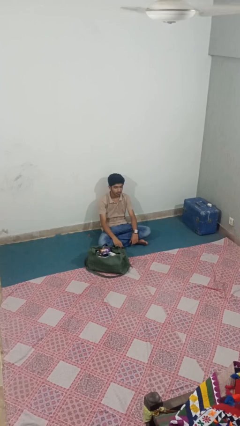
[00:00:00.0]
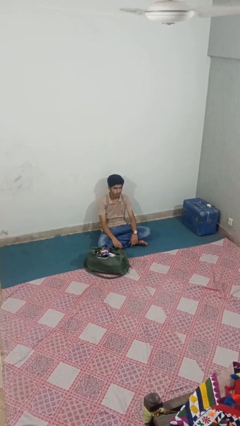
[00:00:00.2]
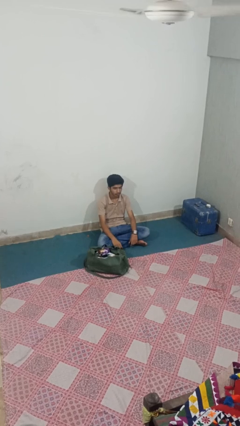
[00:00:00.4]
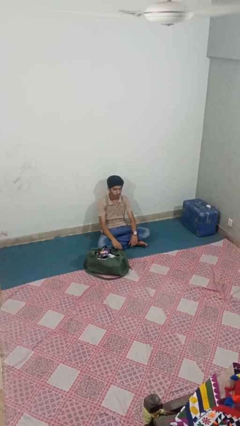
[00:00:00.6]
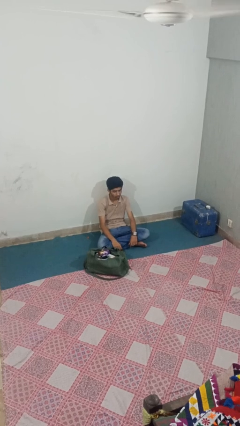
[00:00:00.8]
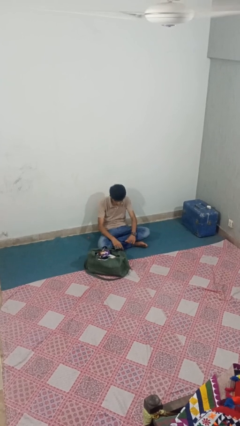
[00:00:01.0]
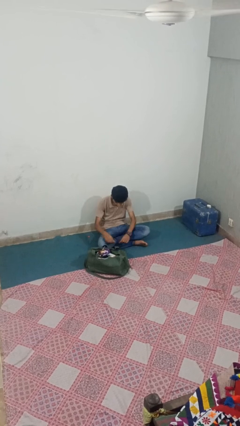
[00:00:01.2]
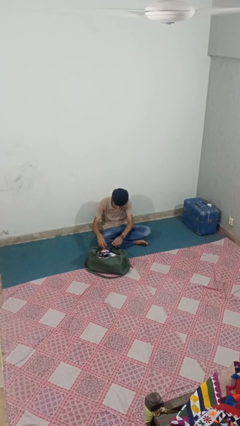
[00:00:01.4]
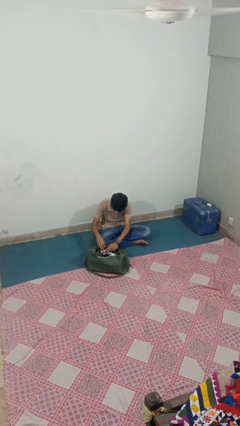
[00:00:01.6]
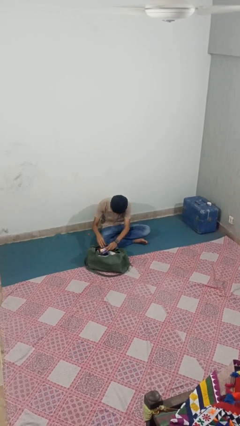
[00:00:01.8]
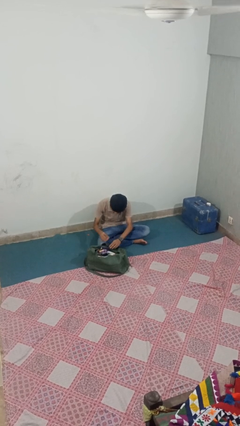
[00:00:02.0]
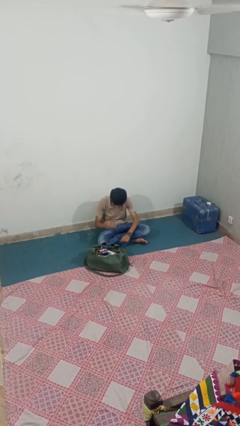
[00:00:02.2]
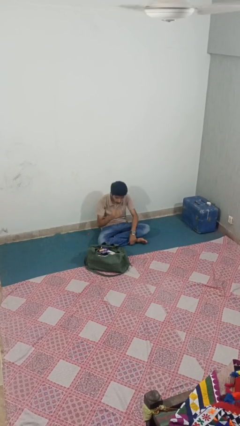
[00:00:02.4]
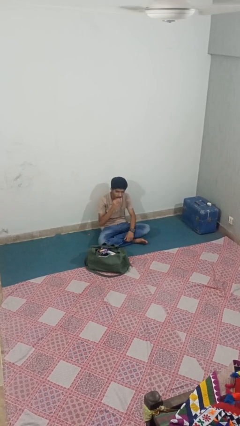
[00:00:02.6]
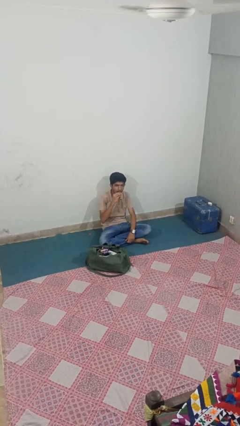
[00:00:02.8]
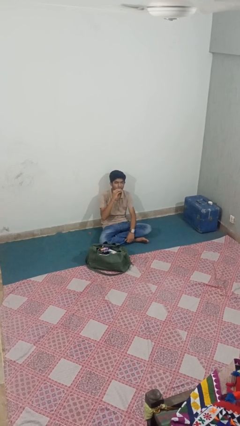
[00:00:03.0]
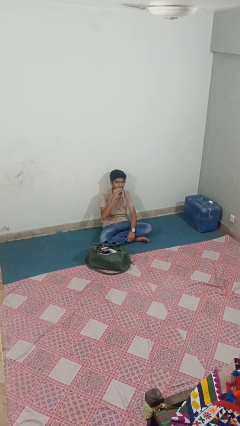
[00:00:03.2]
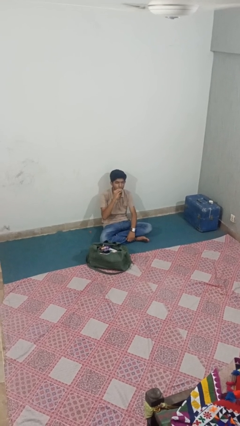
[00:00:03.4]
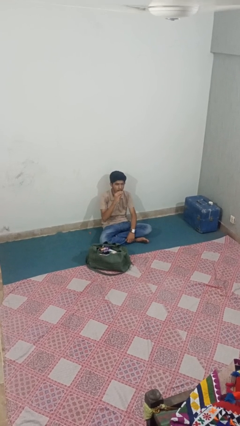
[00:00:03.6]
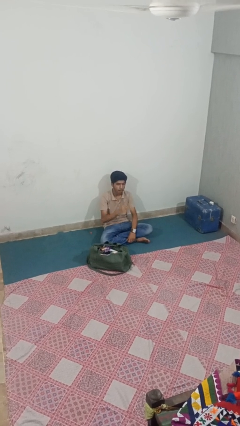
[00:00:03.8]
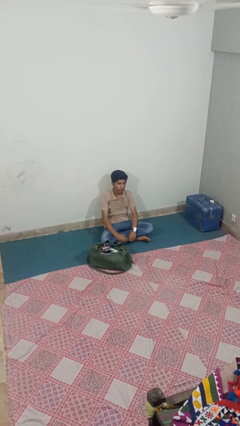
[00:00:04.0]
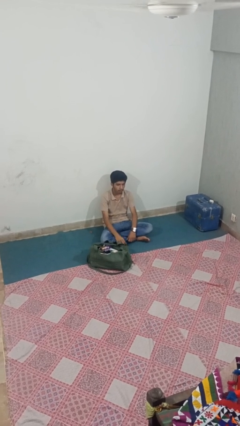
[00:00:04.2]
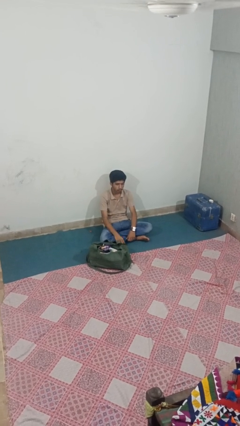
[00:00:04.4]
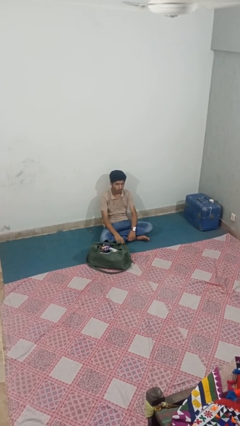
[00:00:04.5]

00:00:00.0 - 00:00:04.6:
person eats snack from bag

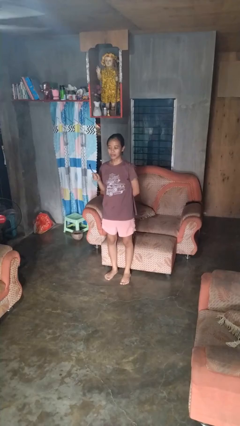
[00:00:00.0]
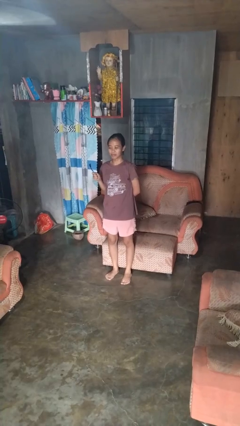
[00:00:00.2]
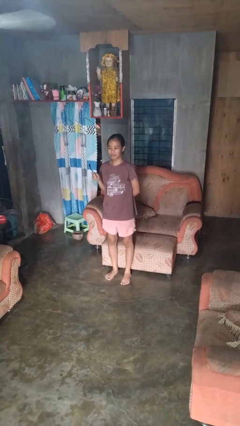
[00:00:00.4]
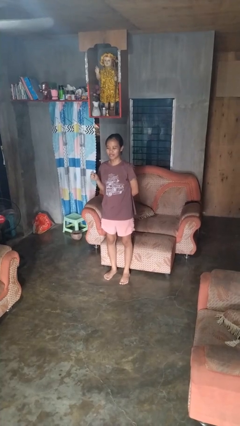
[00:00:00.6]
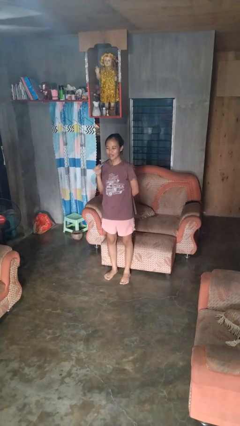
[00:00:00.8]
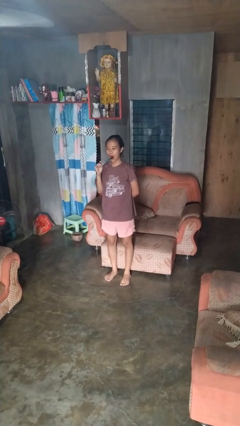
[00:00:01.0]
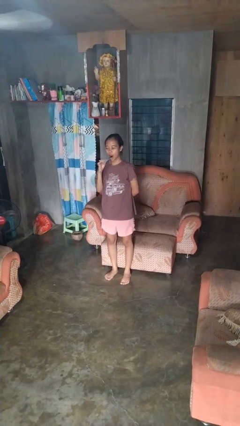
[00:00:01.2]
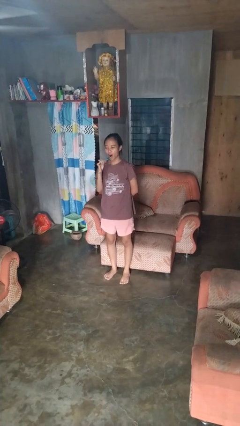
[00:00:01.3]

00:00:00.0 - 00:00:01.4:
person brushes teeth

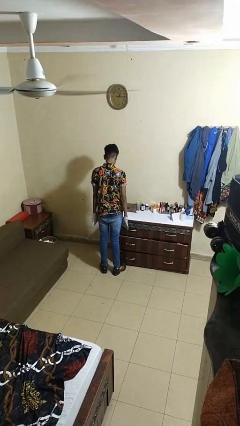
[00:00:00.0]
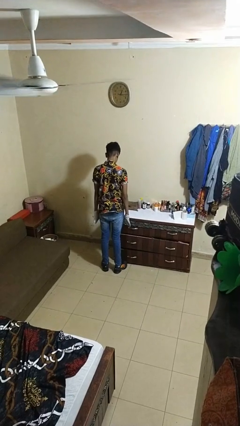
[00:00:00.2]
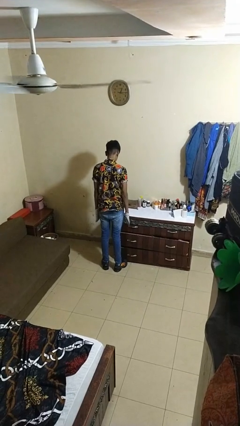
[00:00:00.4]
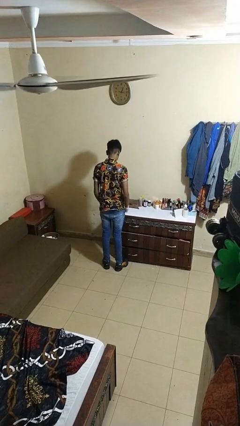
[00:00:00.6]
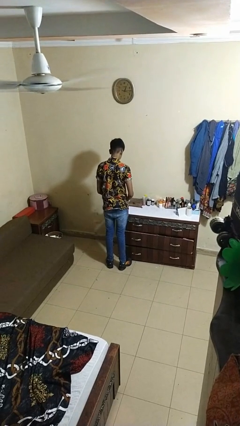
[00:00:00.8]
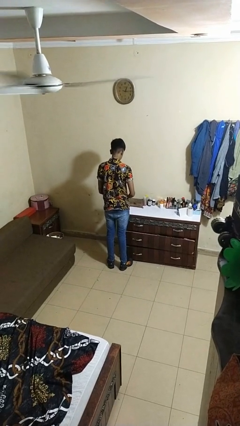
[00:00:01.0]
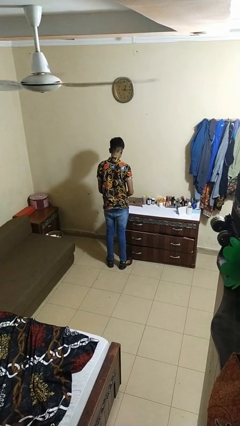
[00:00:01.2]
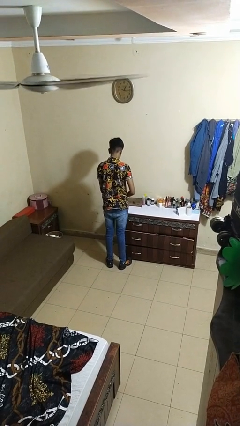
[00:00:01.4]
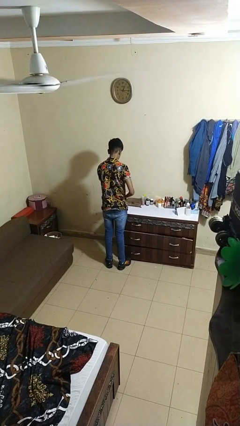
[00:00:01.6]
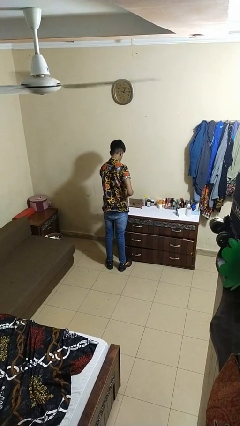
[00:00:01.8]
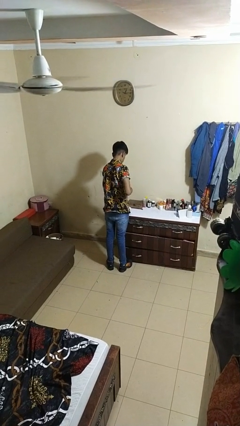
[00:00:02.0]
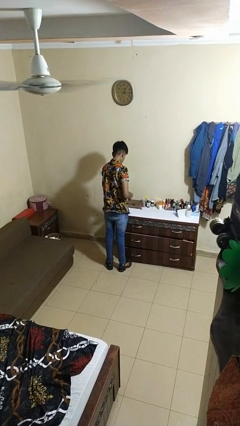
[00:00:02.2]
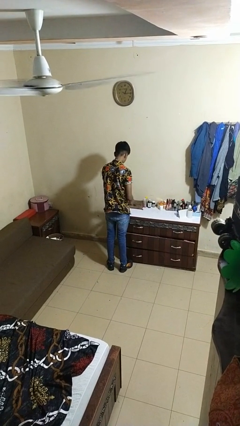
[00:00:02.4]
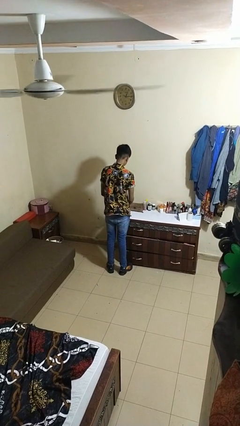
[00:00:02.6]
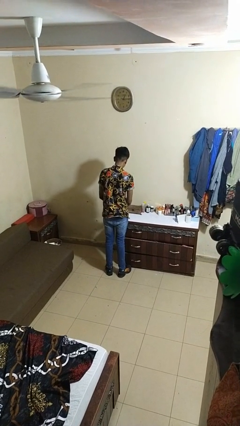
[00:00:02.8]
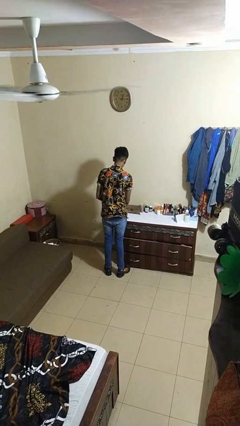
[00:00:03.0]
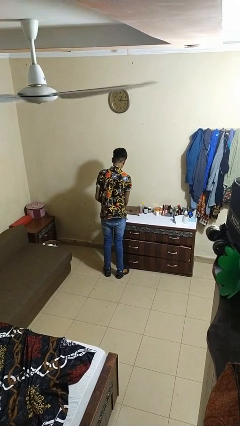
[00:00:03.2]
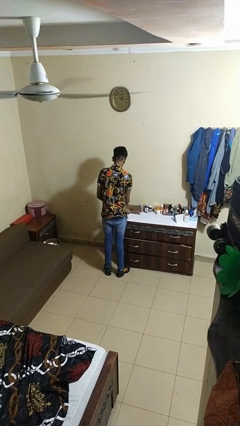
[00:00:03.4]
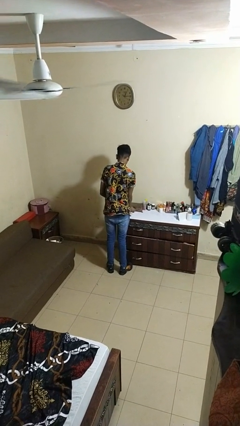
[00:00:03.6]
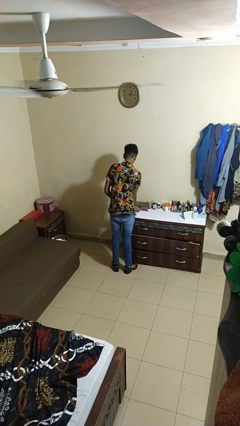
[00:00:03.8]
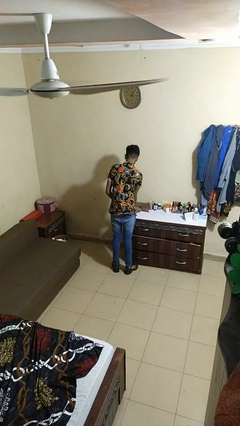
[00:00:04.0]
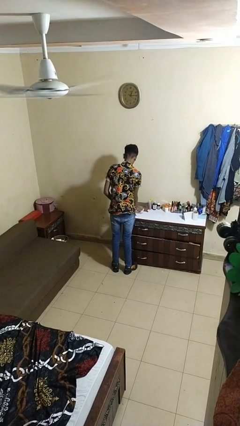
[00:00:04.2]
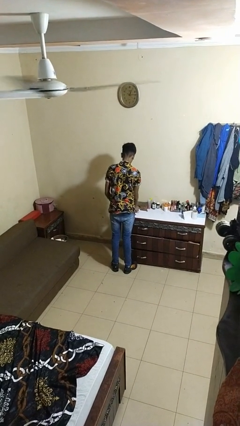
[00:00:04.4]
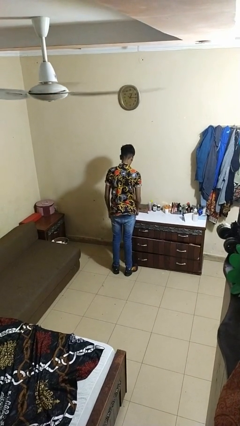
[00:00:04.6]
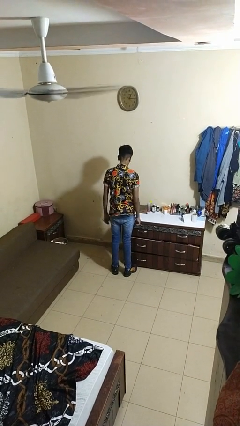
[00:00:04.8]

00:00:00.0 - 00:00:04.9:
person takes off gloves

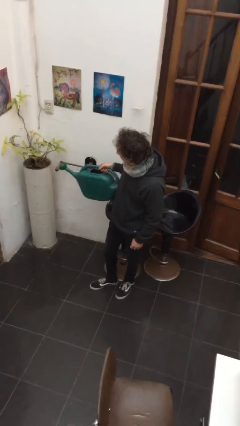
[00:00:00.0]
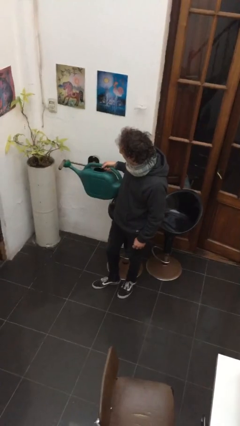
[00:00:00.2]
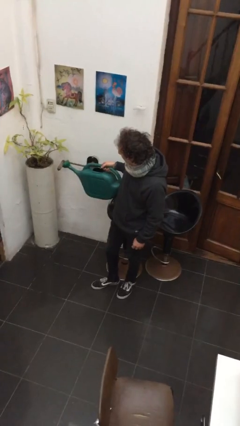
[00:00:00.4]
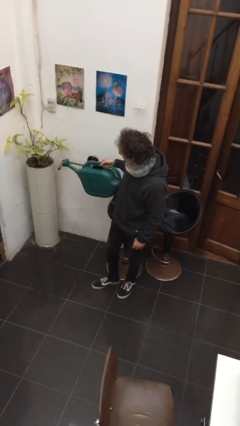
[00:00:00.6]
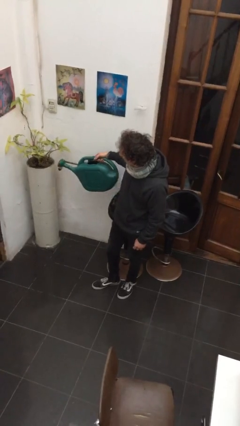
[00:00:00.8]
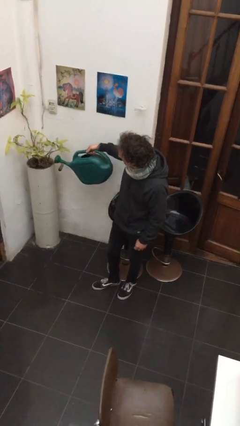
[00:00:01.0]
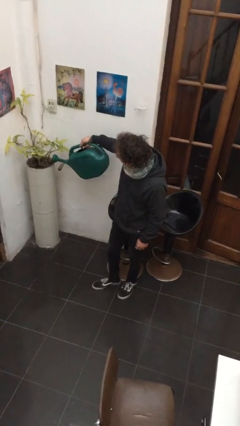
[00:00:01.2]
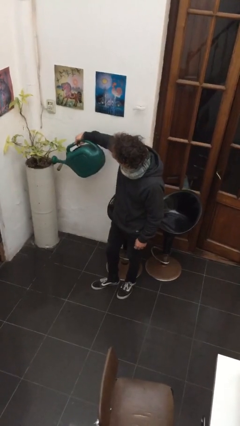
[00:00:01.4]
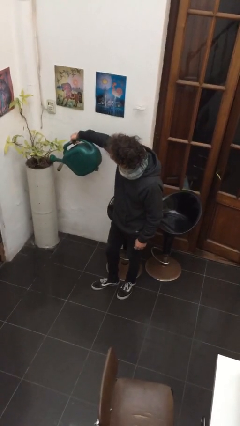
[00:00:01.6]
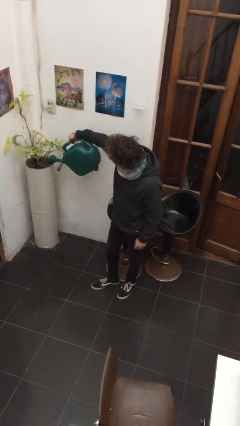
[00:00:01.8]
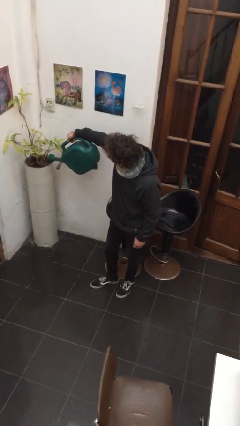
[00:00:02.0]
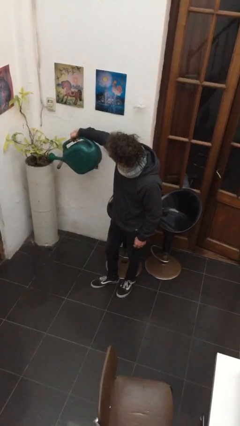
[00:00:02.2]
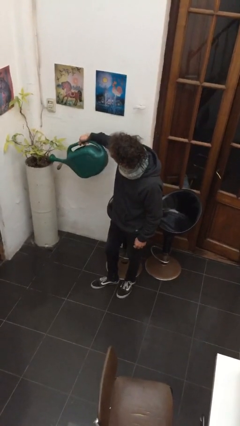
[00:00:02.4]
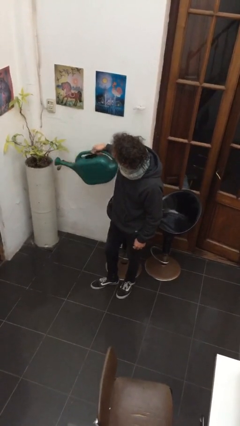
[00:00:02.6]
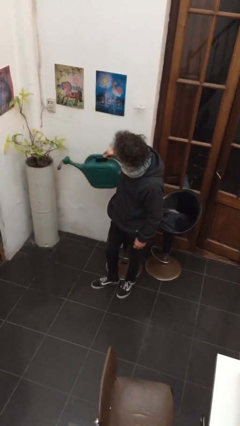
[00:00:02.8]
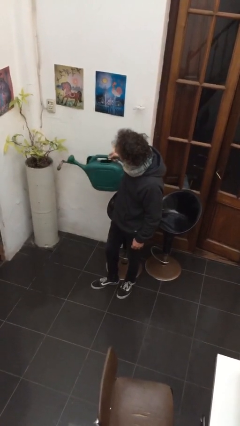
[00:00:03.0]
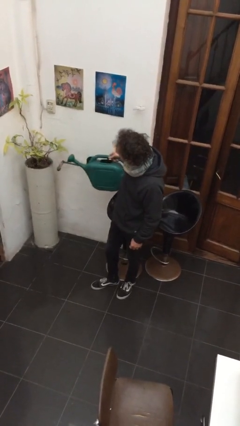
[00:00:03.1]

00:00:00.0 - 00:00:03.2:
person waters houseplant

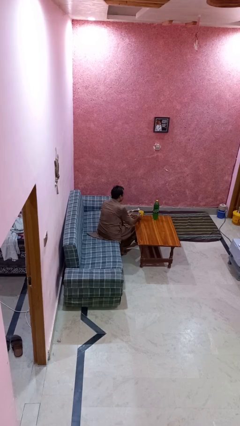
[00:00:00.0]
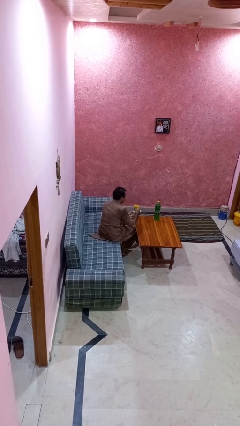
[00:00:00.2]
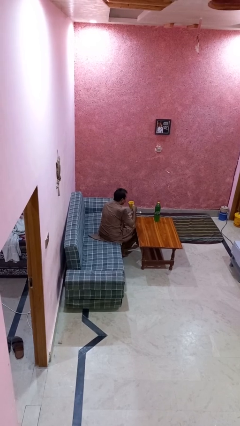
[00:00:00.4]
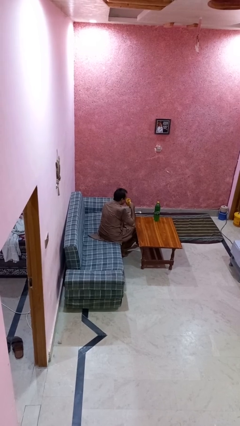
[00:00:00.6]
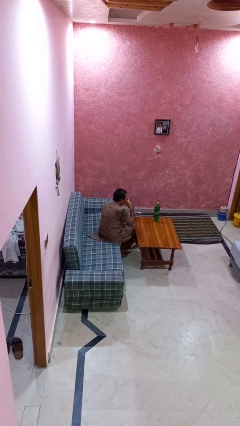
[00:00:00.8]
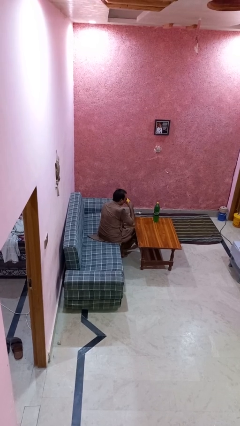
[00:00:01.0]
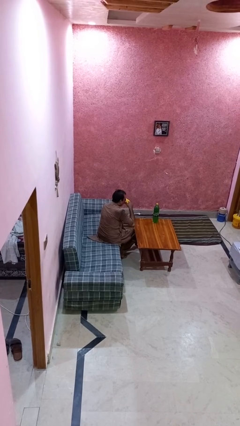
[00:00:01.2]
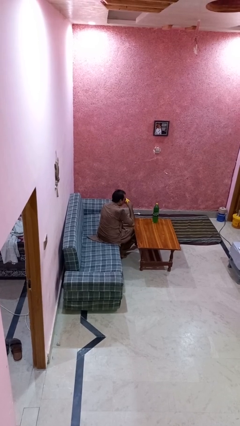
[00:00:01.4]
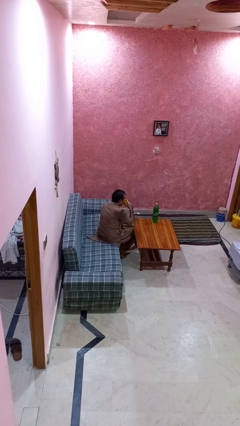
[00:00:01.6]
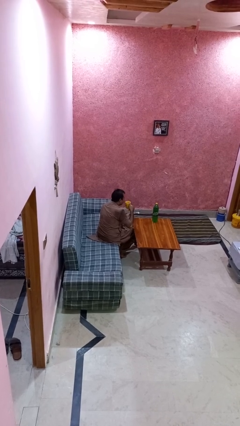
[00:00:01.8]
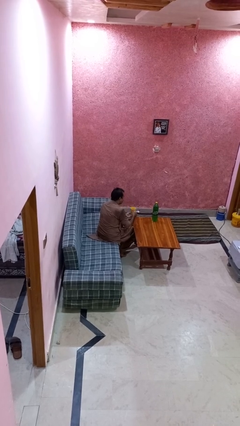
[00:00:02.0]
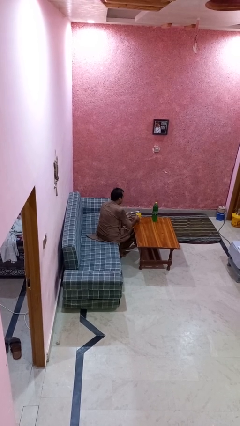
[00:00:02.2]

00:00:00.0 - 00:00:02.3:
person drinks from mug

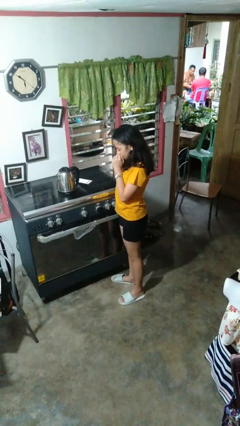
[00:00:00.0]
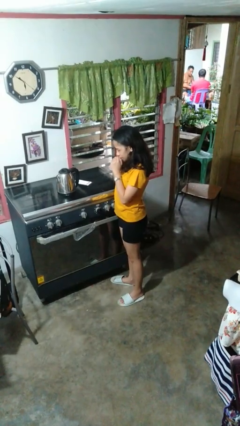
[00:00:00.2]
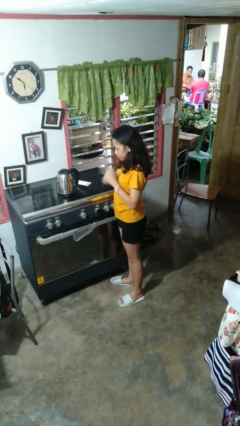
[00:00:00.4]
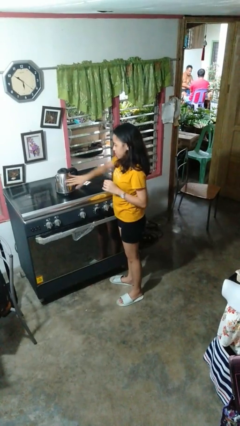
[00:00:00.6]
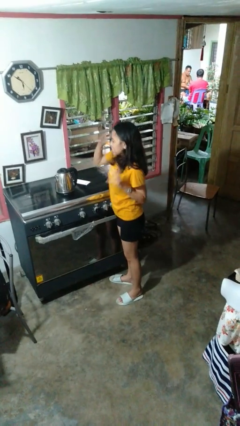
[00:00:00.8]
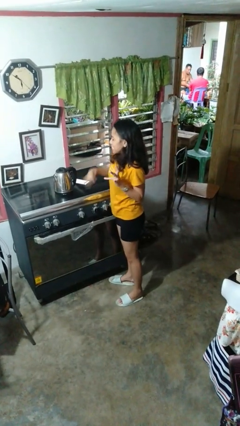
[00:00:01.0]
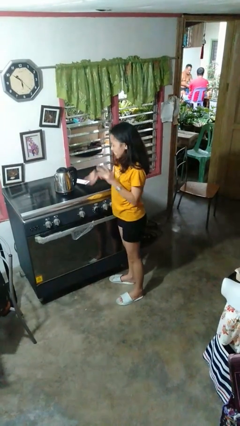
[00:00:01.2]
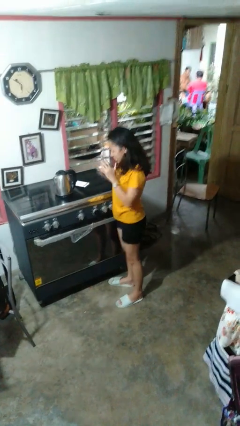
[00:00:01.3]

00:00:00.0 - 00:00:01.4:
person burns hand
